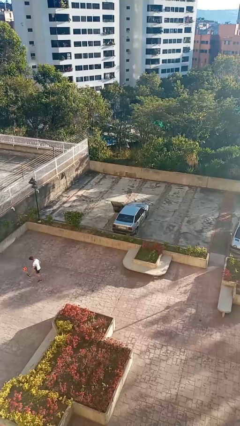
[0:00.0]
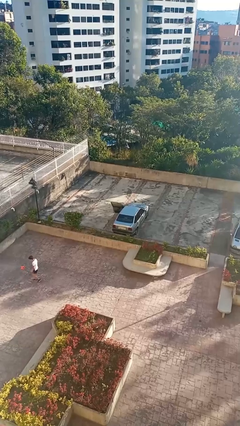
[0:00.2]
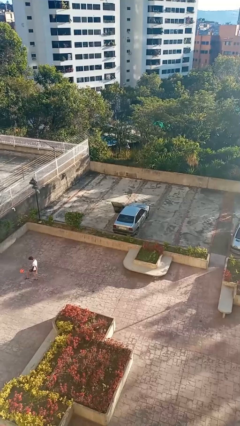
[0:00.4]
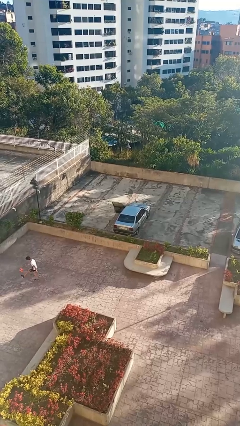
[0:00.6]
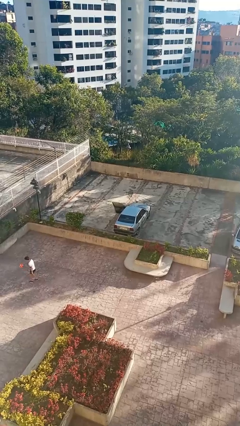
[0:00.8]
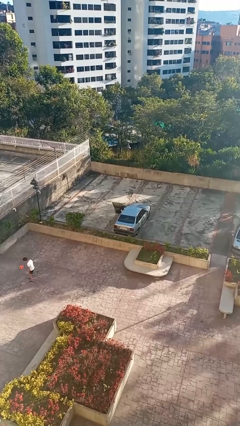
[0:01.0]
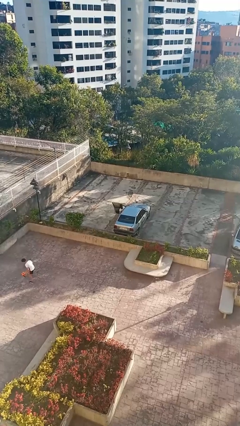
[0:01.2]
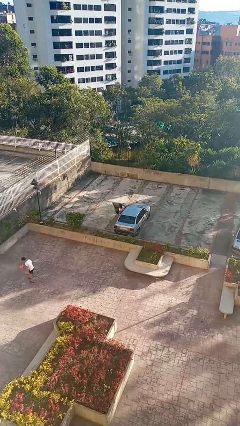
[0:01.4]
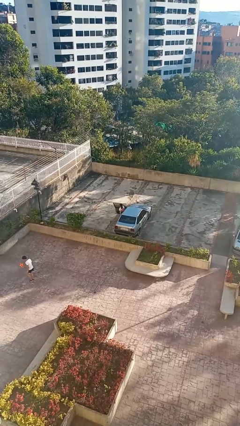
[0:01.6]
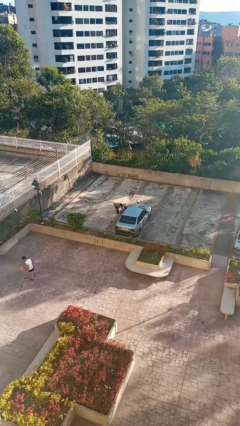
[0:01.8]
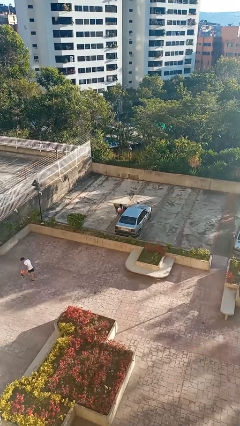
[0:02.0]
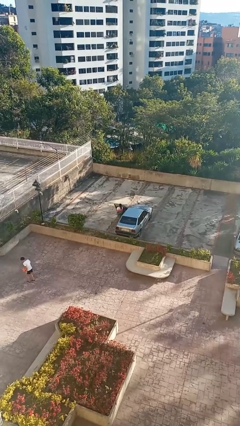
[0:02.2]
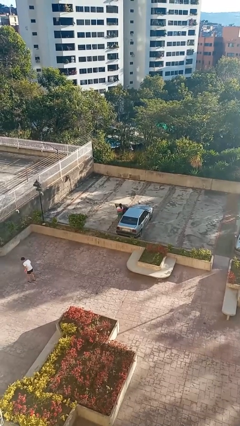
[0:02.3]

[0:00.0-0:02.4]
person exits car

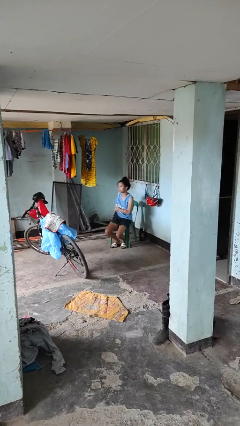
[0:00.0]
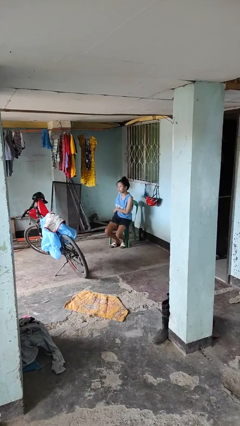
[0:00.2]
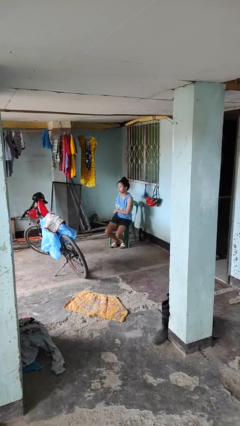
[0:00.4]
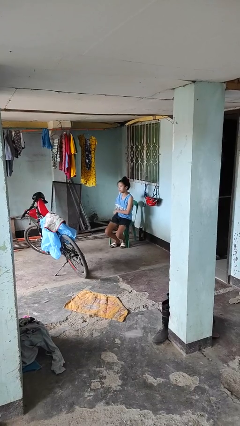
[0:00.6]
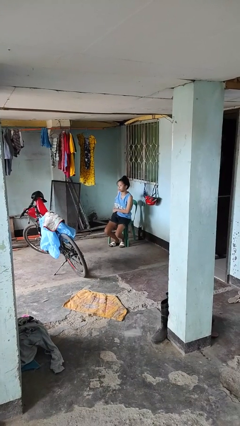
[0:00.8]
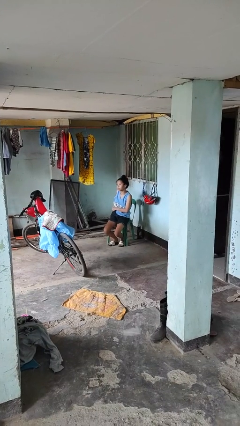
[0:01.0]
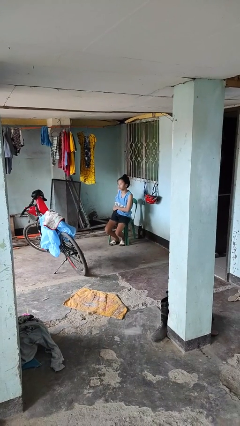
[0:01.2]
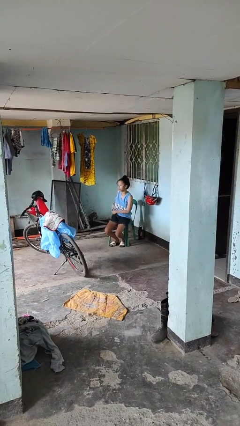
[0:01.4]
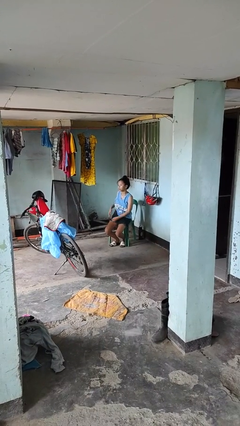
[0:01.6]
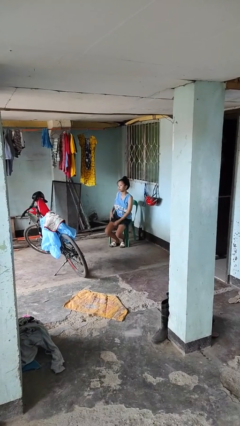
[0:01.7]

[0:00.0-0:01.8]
person puts phone into pocket

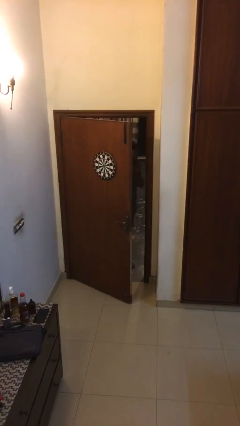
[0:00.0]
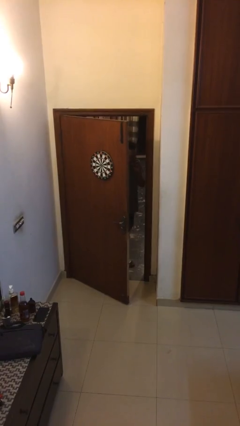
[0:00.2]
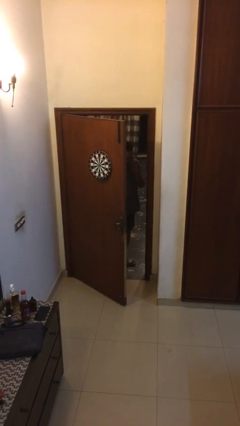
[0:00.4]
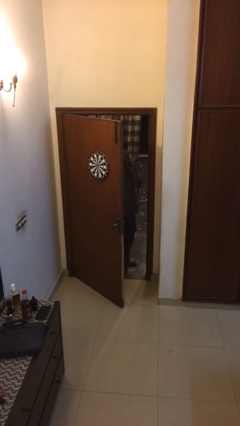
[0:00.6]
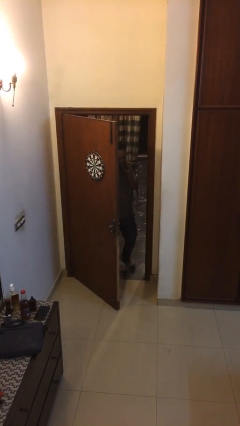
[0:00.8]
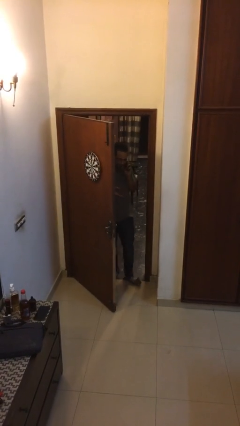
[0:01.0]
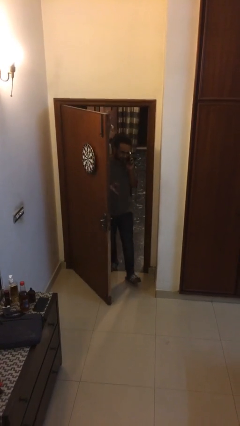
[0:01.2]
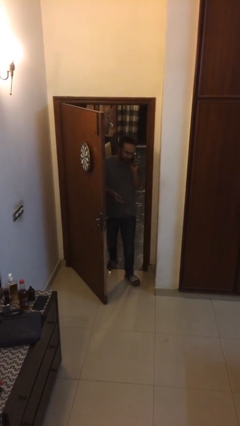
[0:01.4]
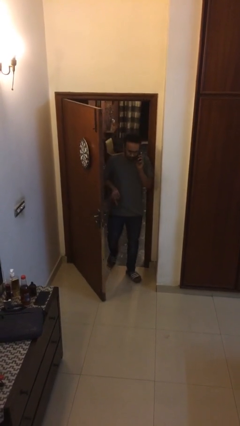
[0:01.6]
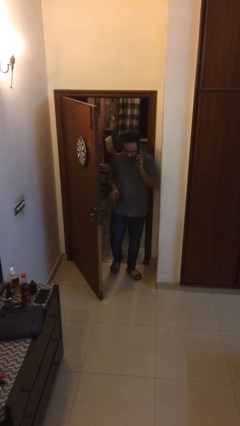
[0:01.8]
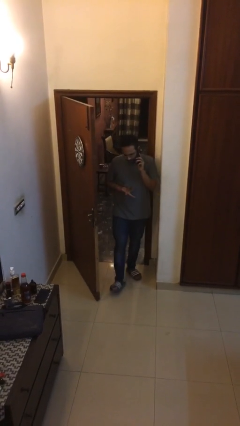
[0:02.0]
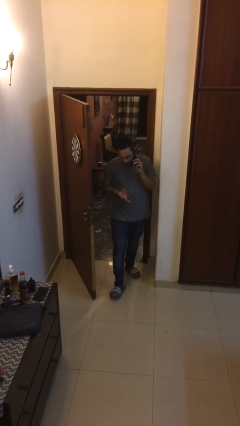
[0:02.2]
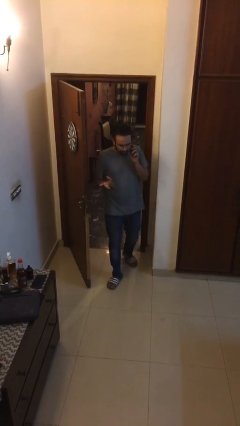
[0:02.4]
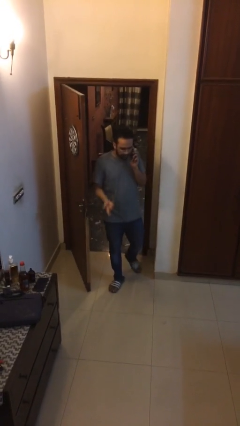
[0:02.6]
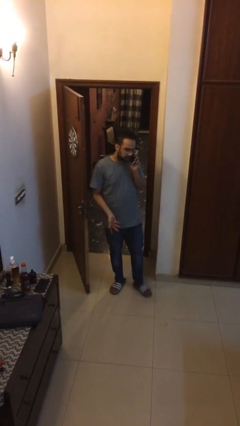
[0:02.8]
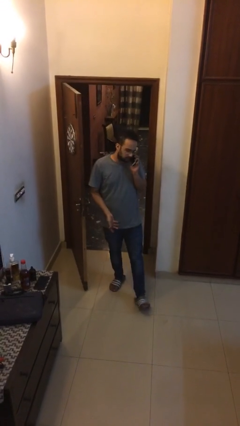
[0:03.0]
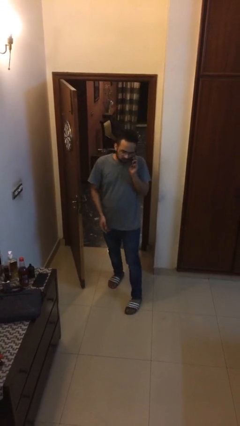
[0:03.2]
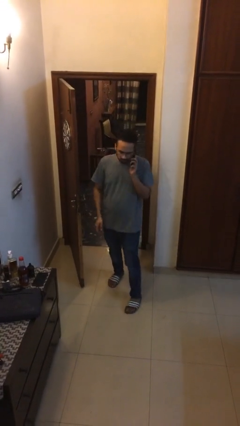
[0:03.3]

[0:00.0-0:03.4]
person enters scene through structure

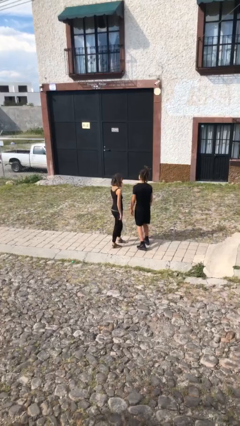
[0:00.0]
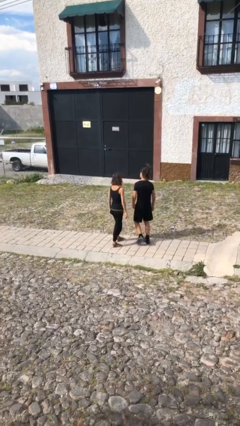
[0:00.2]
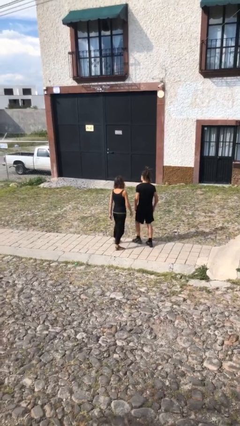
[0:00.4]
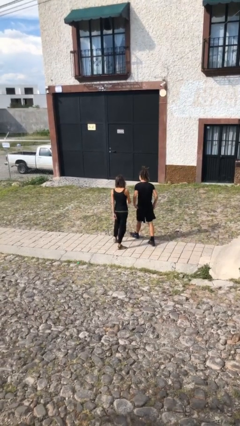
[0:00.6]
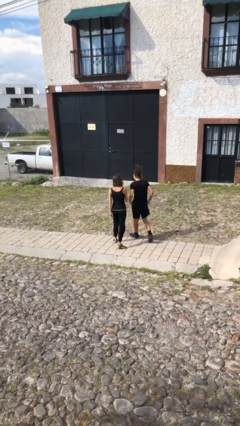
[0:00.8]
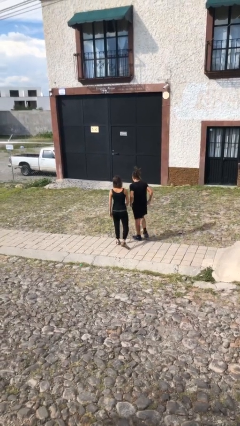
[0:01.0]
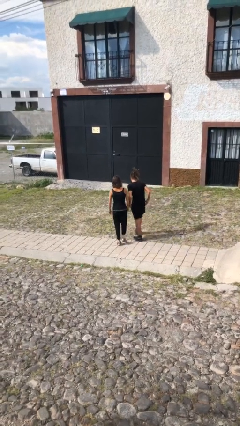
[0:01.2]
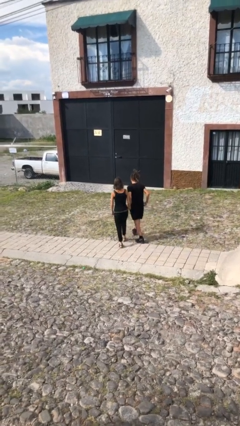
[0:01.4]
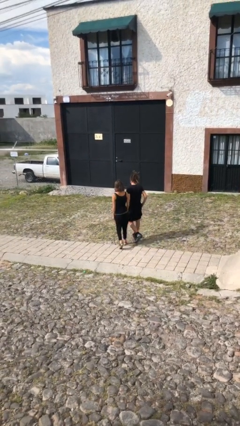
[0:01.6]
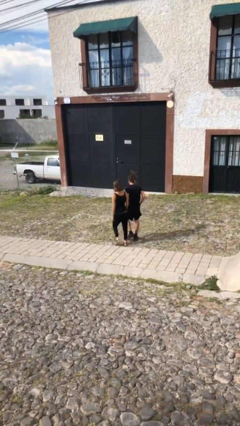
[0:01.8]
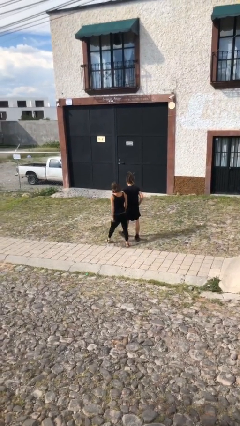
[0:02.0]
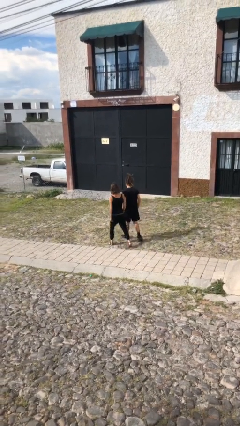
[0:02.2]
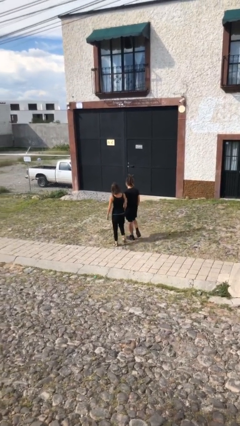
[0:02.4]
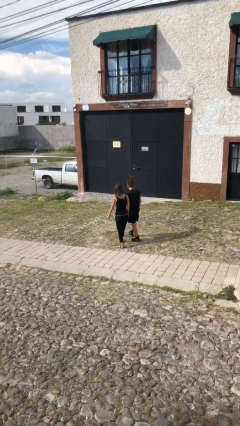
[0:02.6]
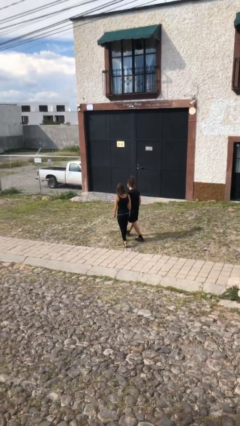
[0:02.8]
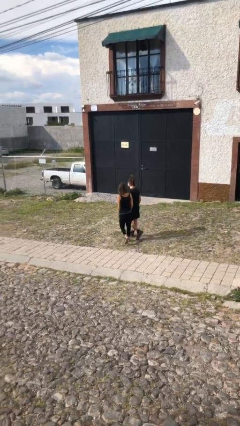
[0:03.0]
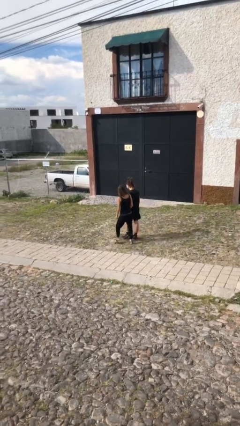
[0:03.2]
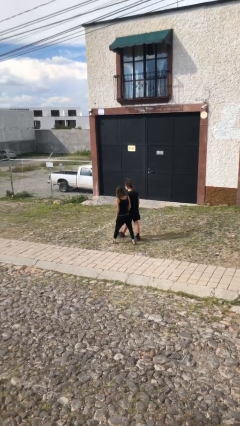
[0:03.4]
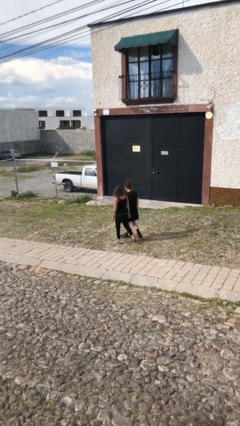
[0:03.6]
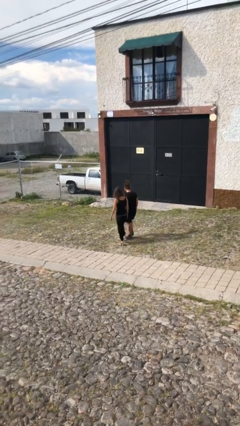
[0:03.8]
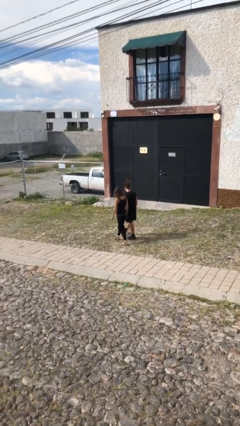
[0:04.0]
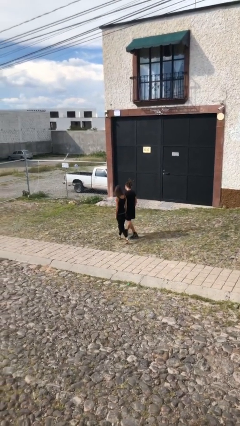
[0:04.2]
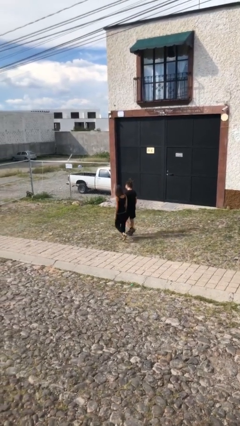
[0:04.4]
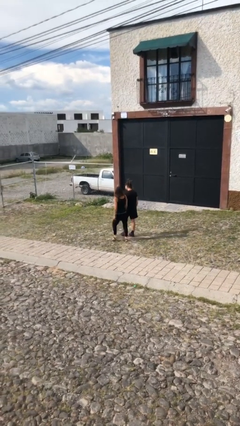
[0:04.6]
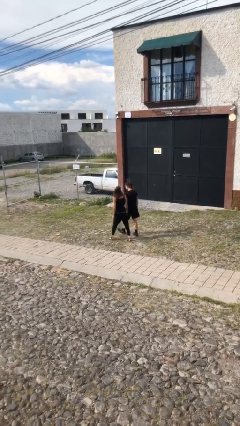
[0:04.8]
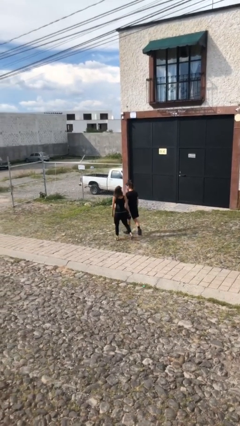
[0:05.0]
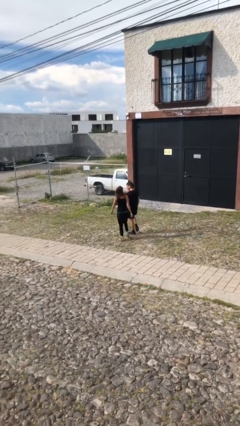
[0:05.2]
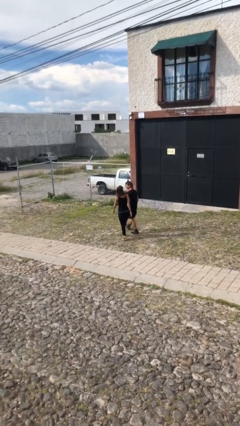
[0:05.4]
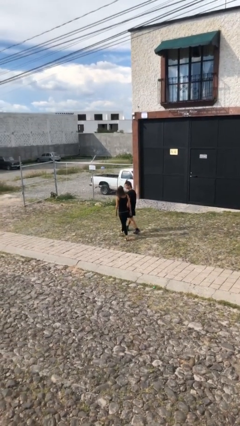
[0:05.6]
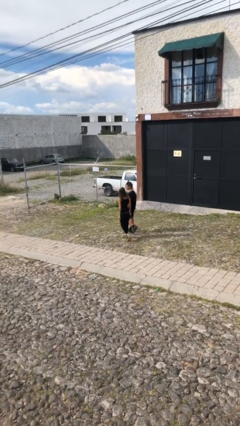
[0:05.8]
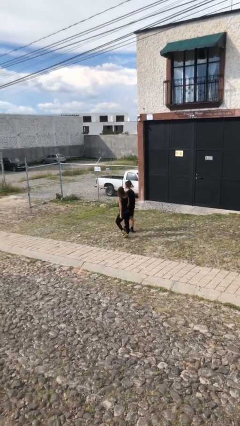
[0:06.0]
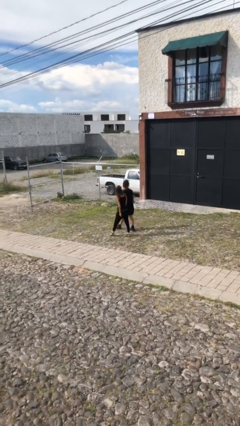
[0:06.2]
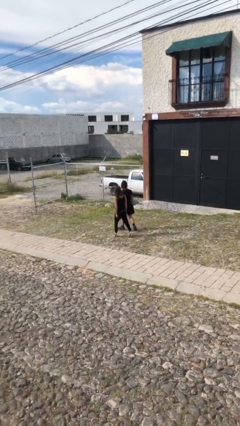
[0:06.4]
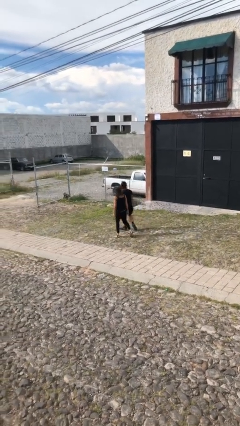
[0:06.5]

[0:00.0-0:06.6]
person talks to person

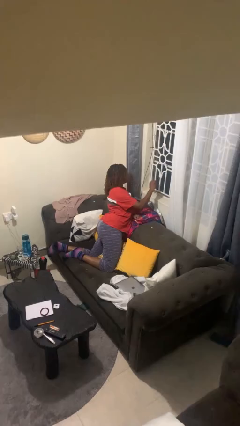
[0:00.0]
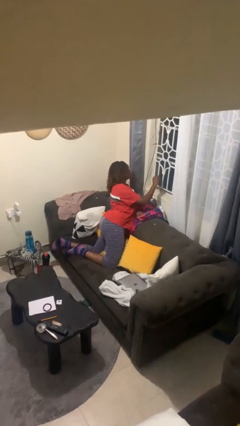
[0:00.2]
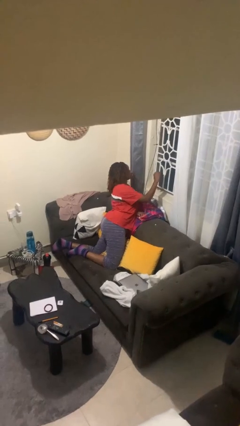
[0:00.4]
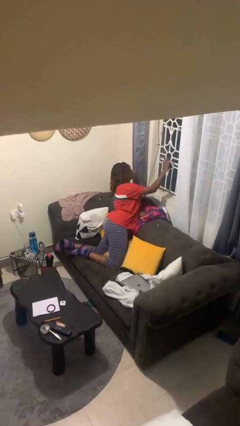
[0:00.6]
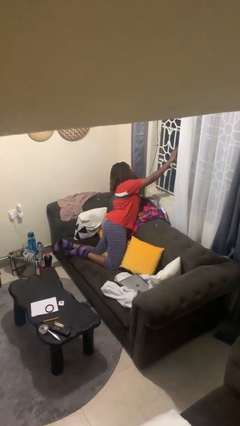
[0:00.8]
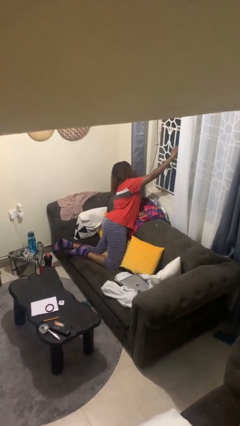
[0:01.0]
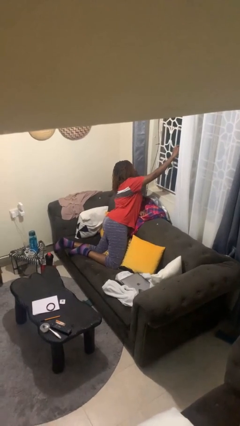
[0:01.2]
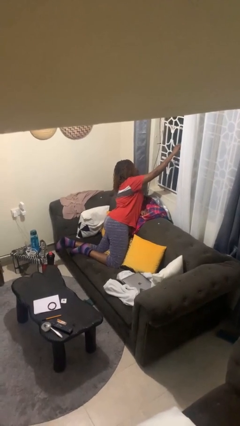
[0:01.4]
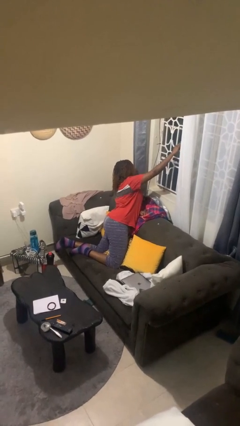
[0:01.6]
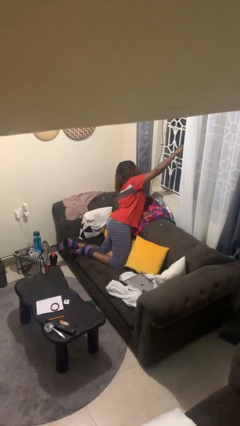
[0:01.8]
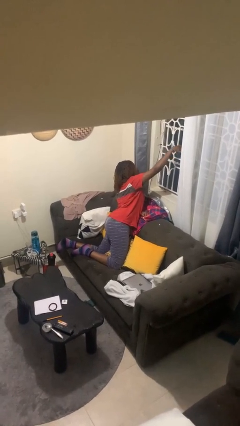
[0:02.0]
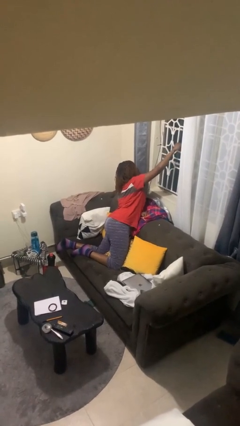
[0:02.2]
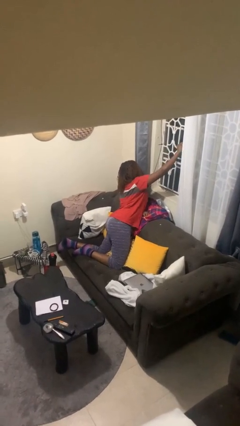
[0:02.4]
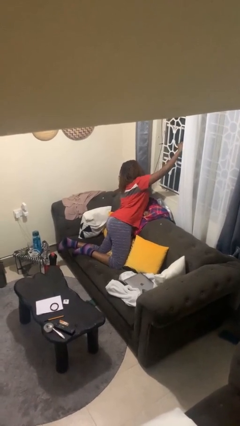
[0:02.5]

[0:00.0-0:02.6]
person opens home window

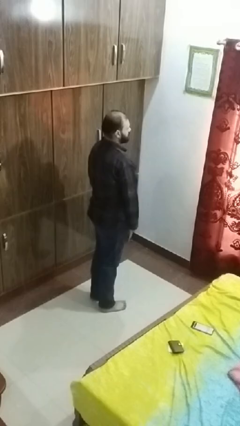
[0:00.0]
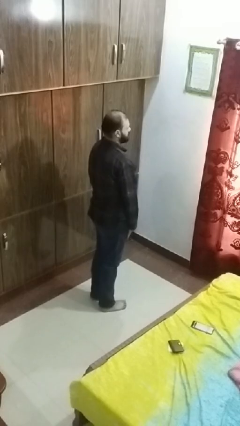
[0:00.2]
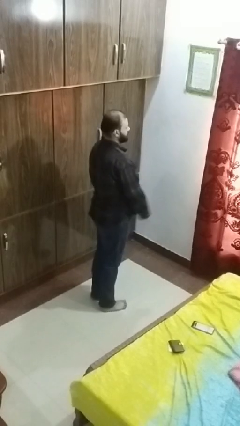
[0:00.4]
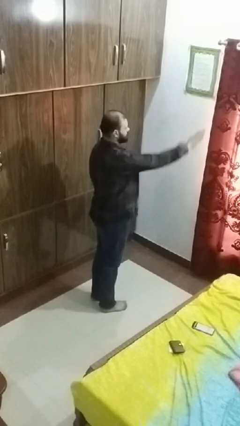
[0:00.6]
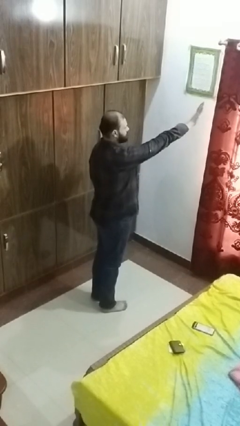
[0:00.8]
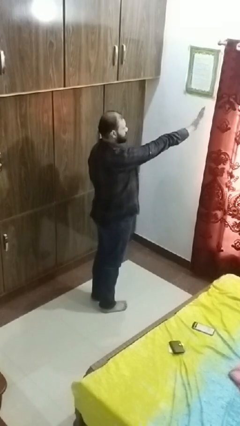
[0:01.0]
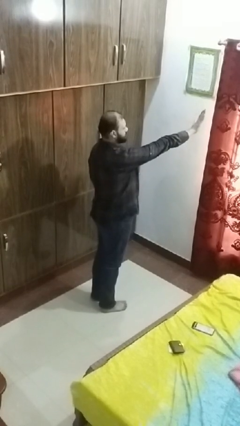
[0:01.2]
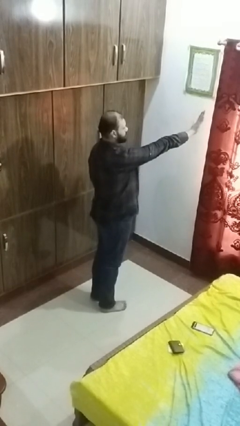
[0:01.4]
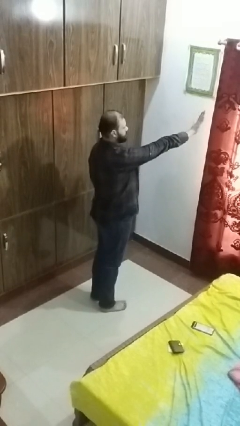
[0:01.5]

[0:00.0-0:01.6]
person gestures stop
